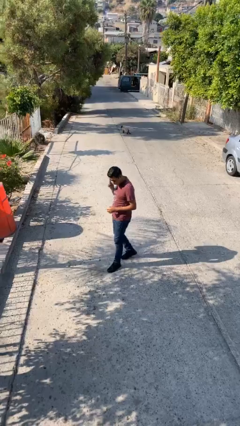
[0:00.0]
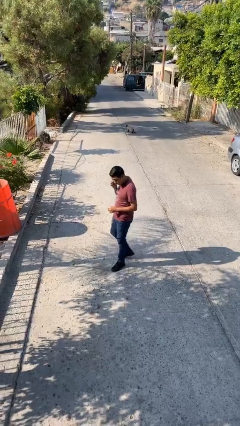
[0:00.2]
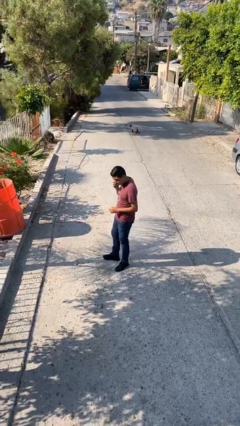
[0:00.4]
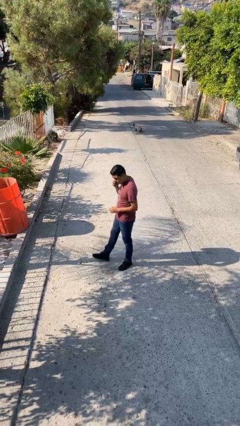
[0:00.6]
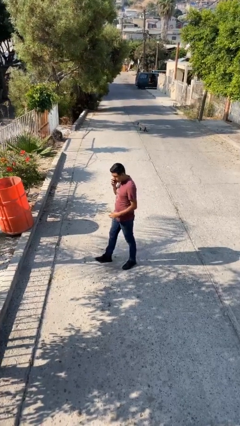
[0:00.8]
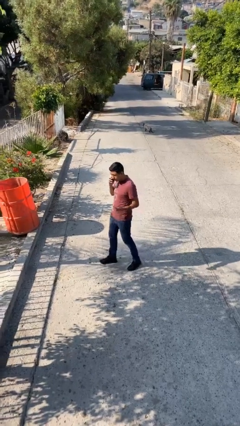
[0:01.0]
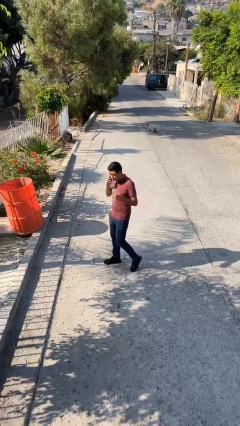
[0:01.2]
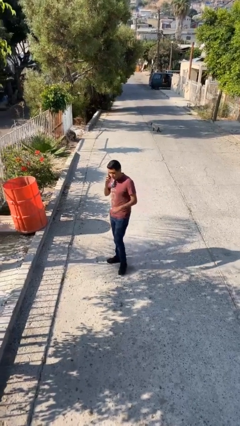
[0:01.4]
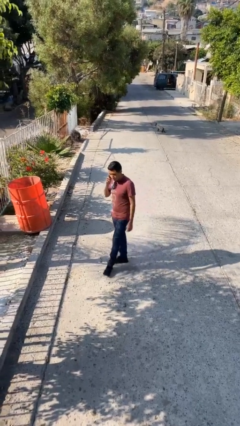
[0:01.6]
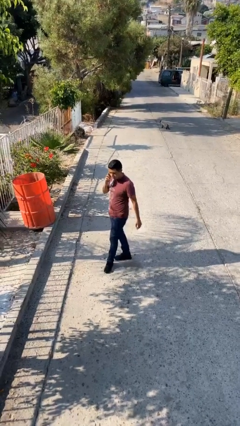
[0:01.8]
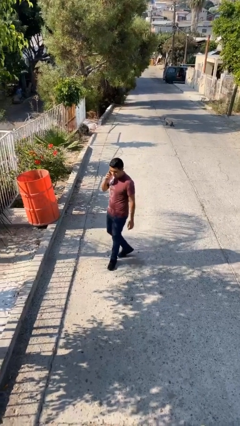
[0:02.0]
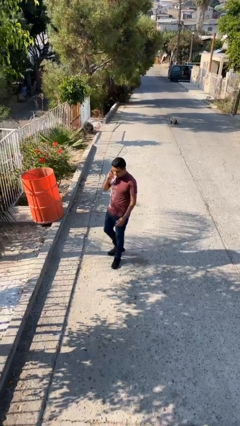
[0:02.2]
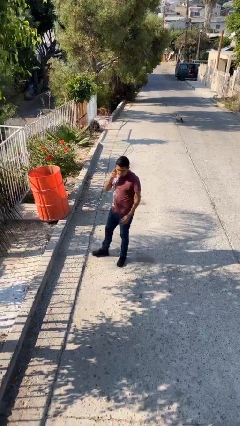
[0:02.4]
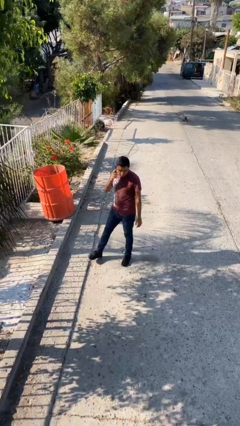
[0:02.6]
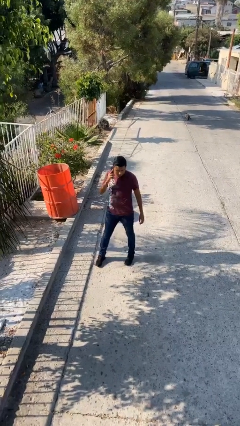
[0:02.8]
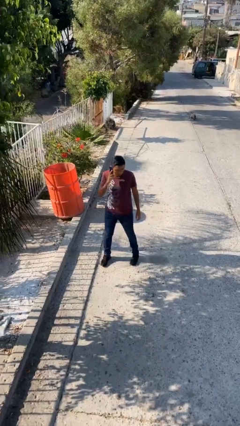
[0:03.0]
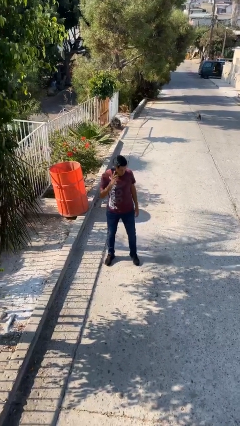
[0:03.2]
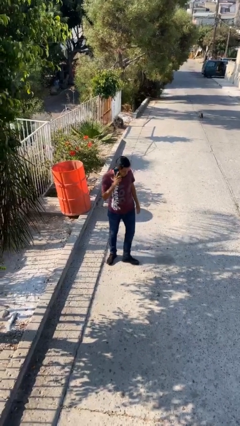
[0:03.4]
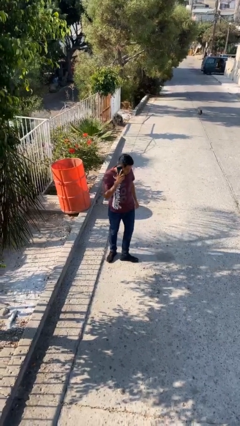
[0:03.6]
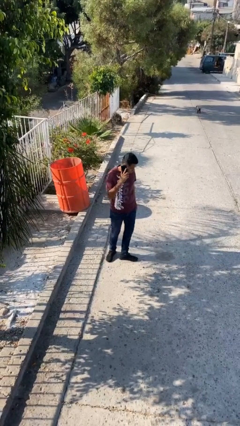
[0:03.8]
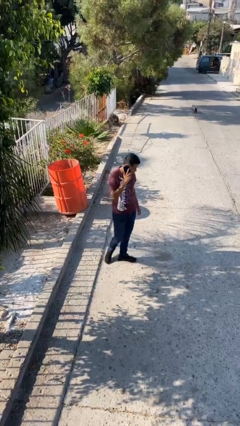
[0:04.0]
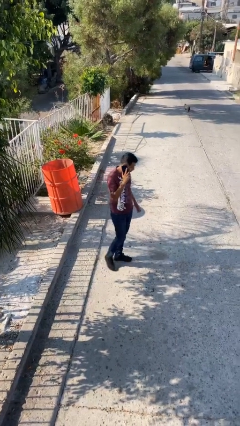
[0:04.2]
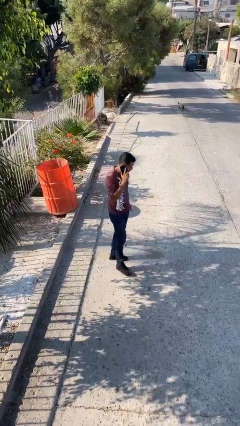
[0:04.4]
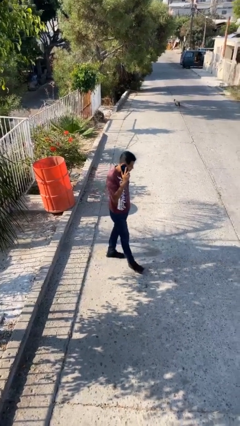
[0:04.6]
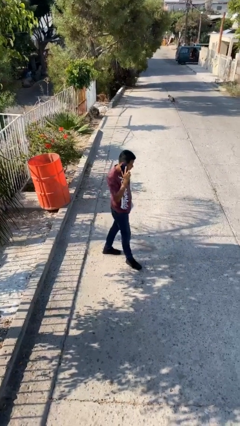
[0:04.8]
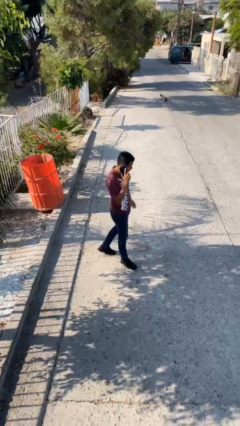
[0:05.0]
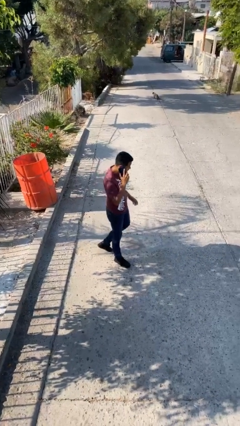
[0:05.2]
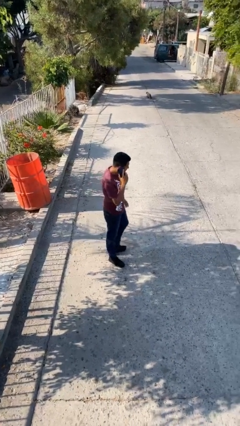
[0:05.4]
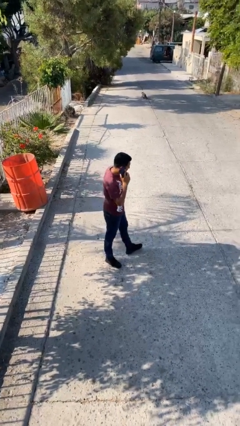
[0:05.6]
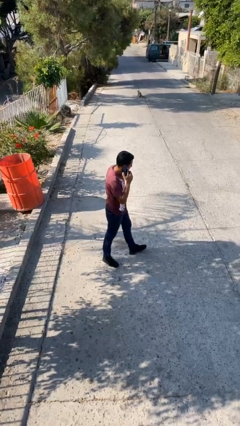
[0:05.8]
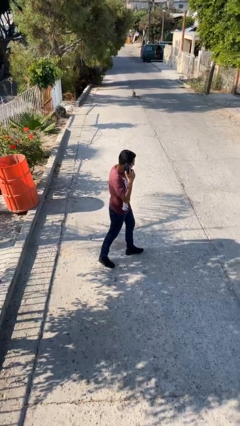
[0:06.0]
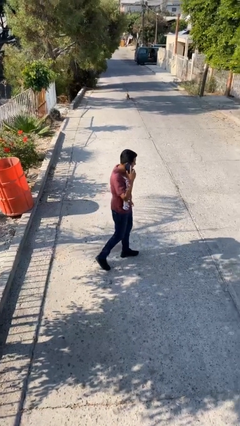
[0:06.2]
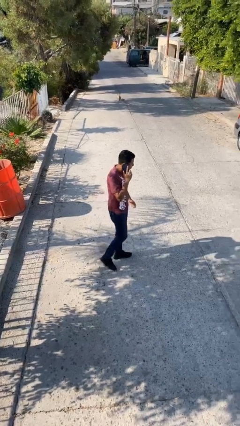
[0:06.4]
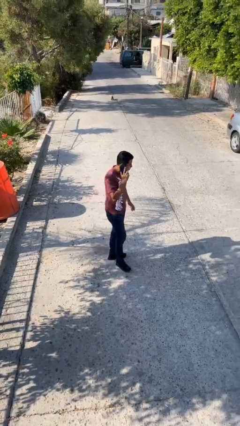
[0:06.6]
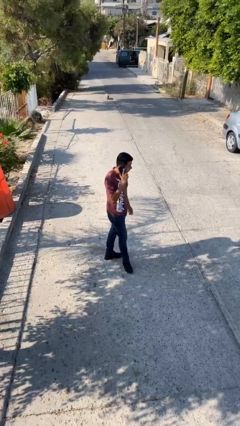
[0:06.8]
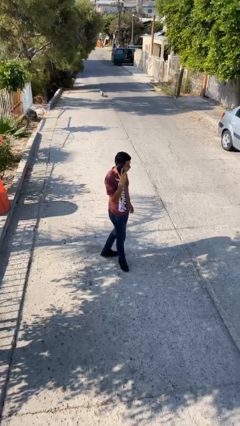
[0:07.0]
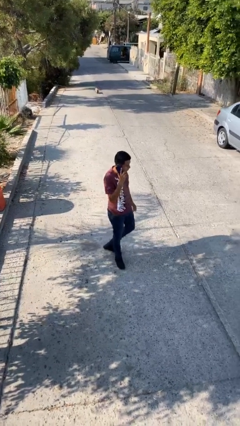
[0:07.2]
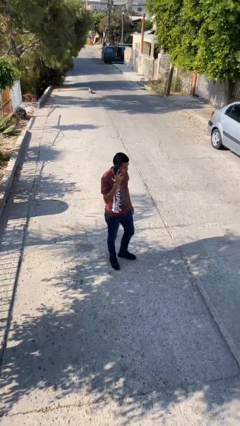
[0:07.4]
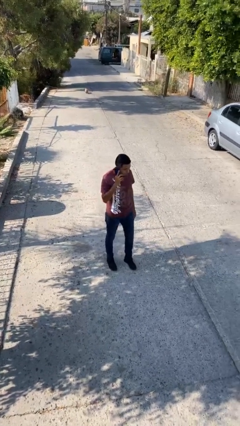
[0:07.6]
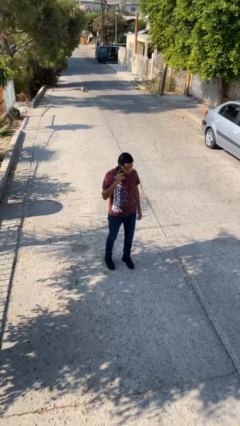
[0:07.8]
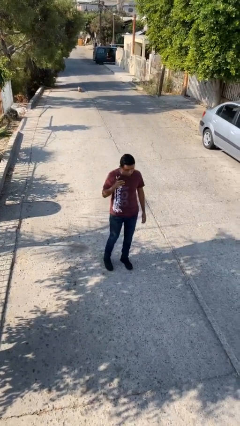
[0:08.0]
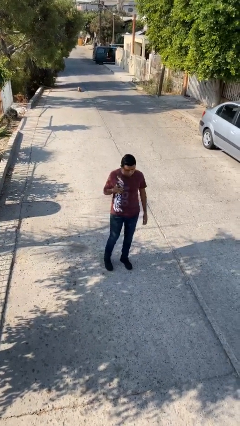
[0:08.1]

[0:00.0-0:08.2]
person talks on phone

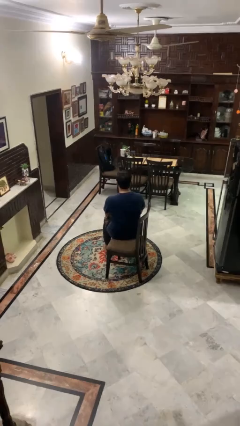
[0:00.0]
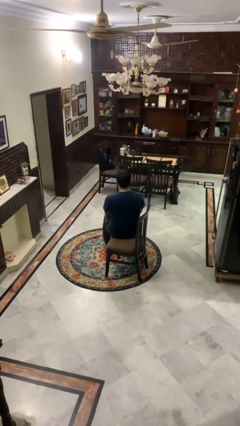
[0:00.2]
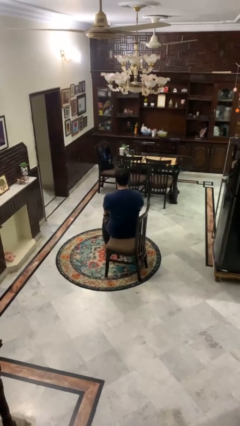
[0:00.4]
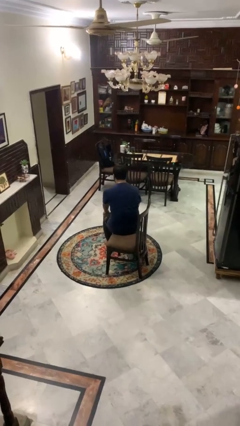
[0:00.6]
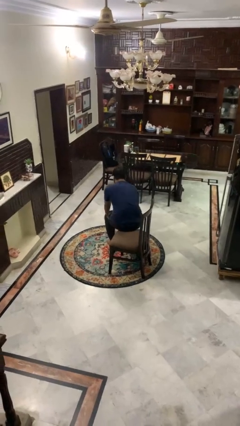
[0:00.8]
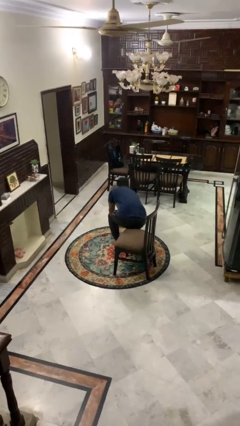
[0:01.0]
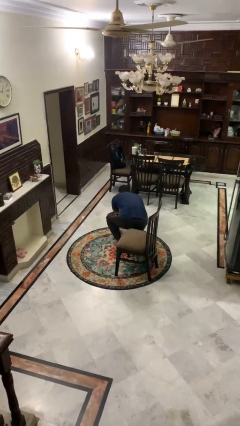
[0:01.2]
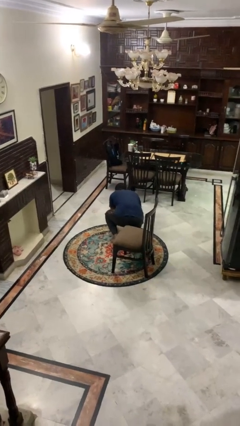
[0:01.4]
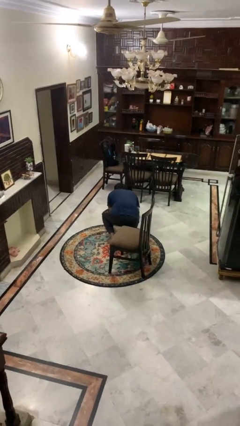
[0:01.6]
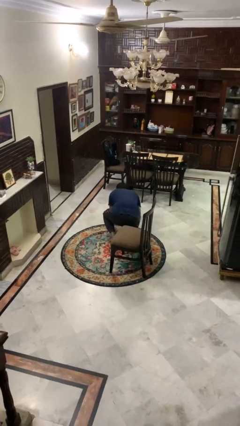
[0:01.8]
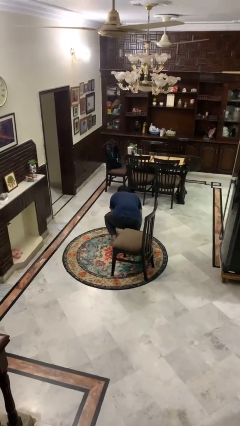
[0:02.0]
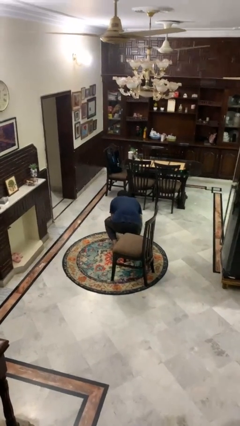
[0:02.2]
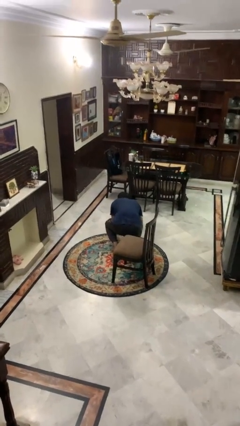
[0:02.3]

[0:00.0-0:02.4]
person falls from chair

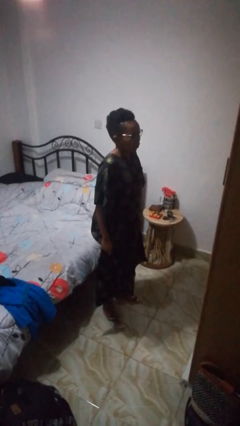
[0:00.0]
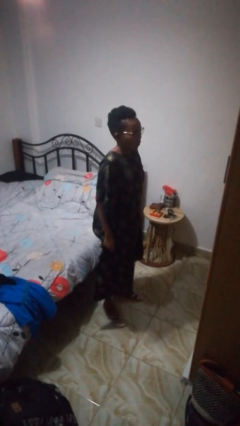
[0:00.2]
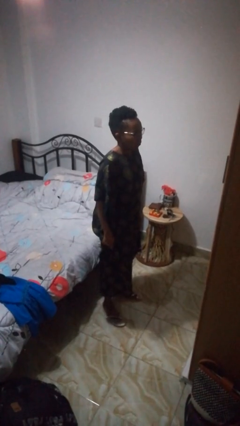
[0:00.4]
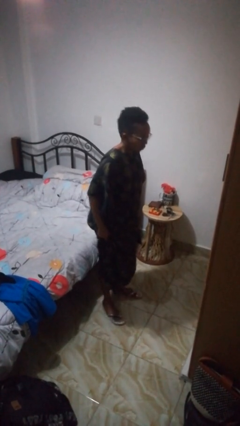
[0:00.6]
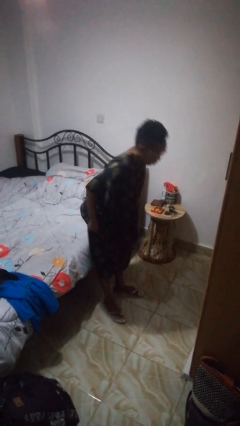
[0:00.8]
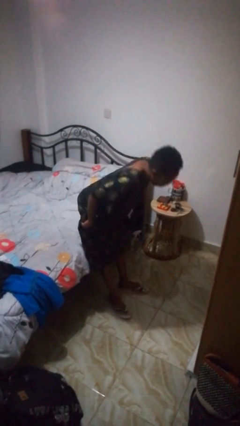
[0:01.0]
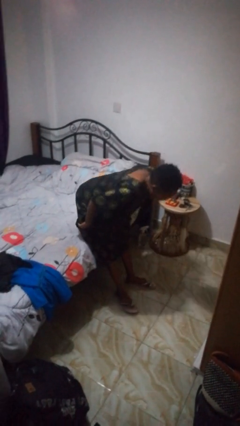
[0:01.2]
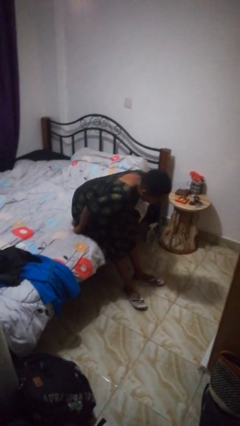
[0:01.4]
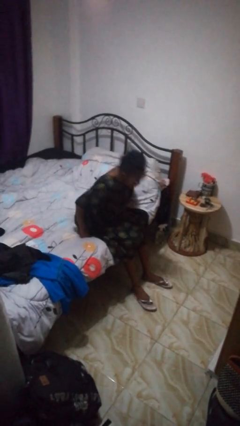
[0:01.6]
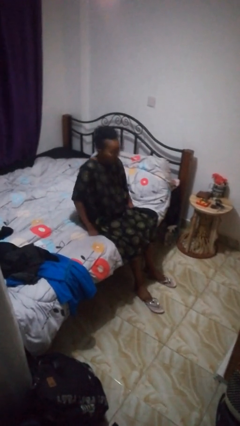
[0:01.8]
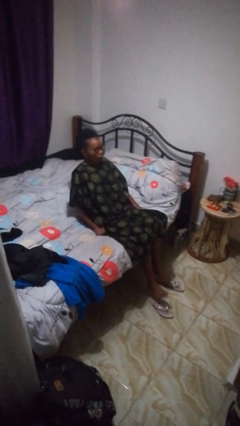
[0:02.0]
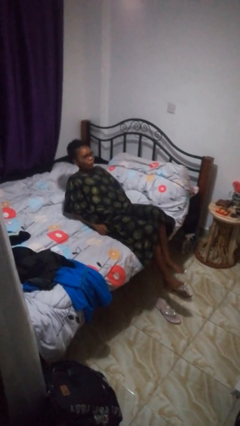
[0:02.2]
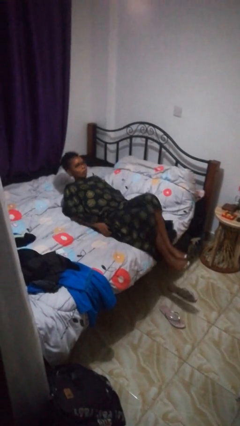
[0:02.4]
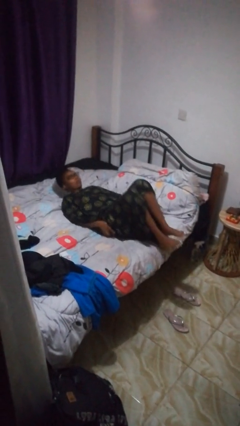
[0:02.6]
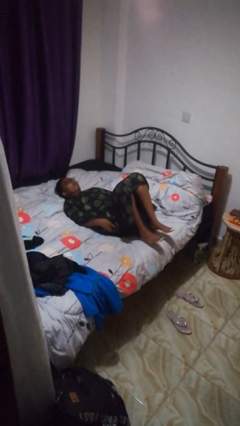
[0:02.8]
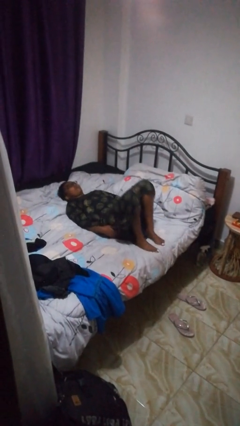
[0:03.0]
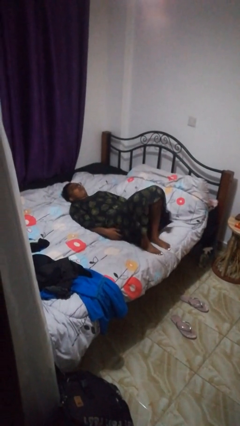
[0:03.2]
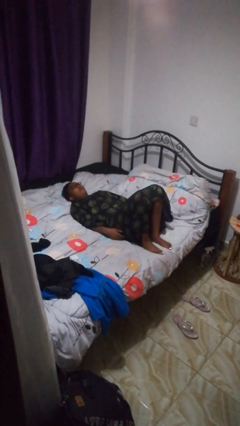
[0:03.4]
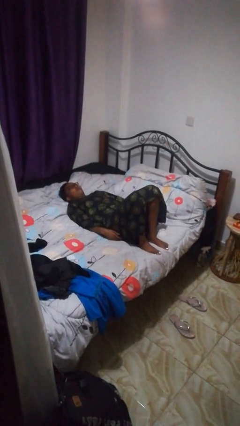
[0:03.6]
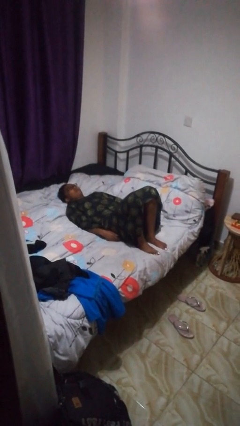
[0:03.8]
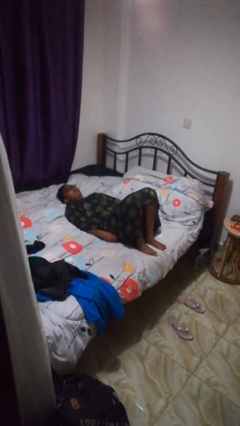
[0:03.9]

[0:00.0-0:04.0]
person lies down on bed

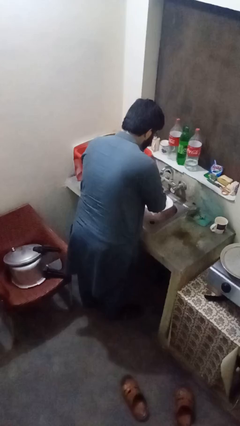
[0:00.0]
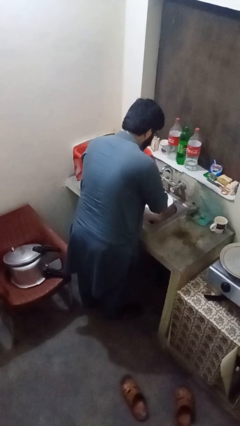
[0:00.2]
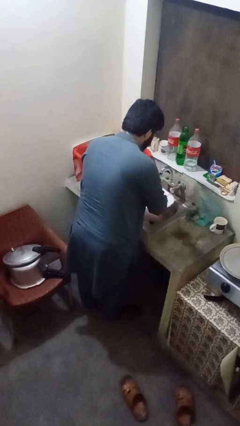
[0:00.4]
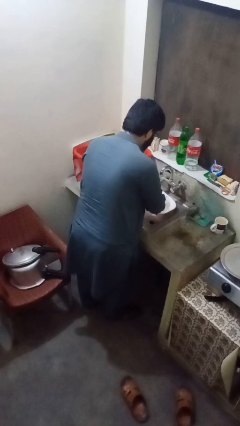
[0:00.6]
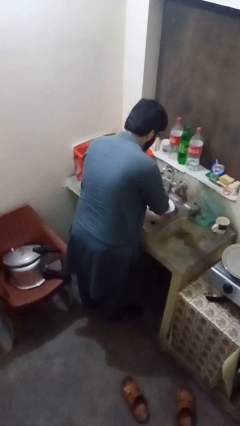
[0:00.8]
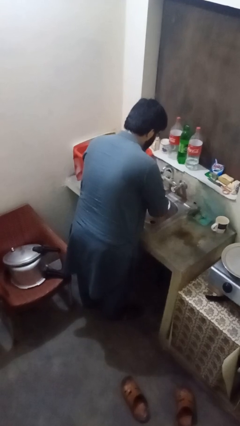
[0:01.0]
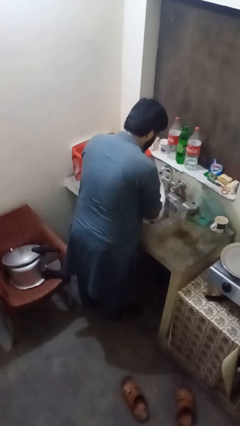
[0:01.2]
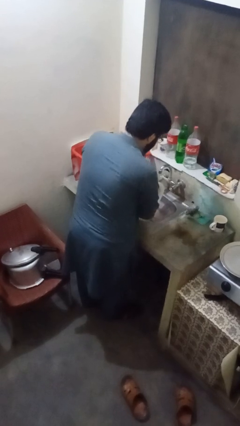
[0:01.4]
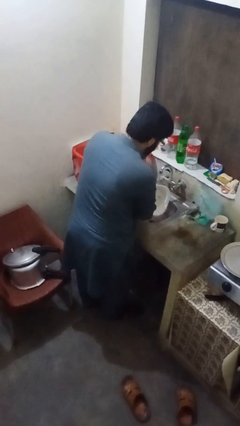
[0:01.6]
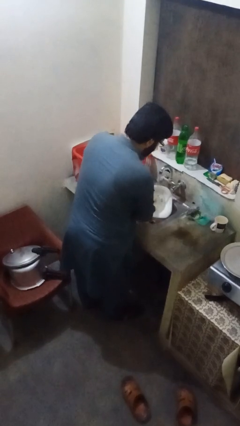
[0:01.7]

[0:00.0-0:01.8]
person washes dish

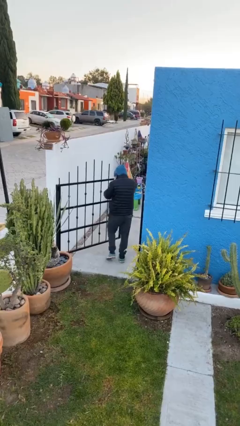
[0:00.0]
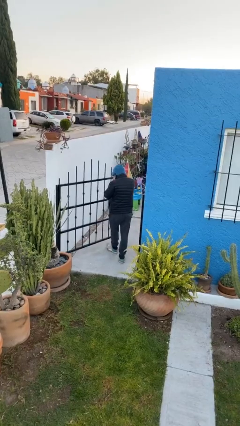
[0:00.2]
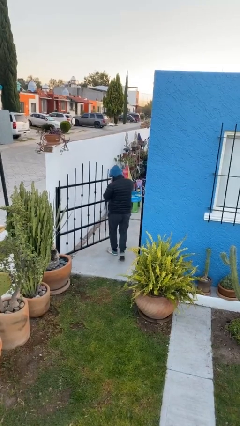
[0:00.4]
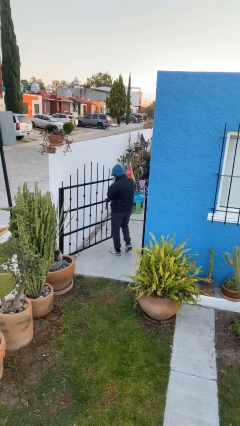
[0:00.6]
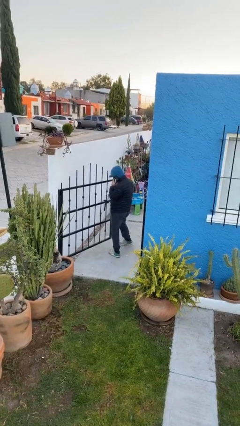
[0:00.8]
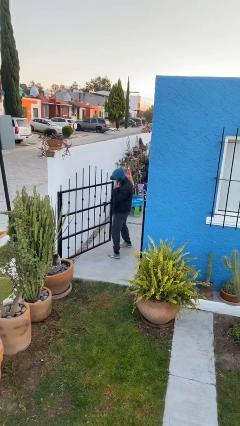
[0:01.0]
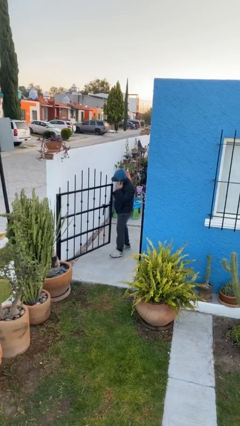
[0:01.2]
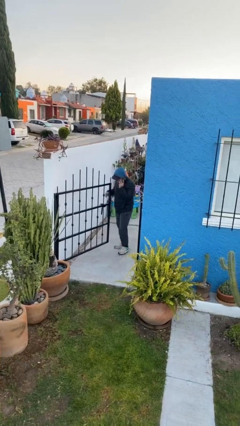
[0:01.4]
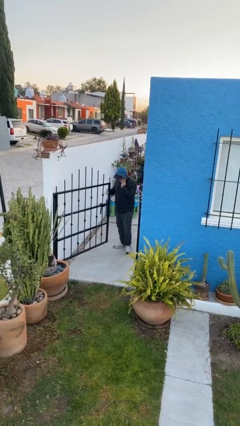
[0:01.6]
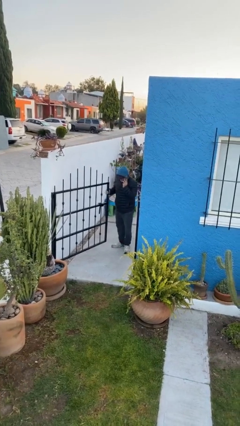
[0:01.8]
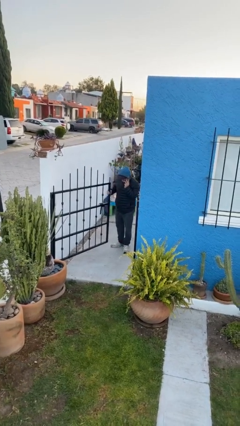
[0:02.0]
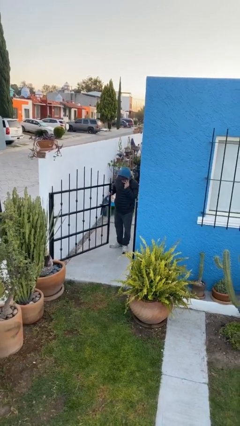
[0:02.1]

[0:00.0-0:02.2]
person exits scene through structure
